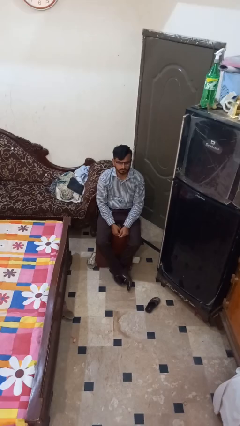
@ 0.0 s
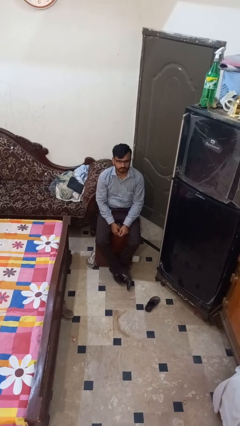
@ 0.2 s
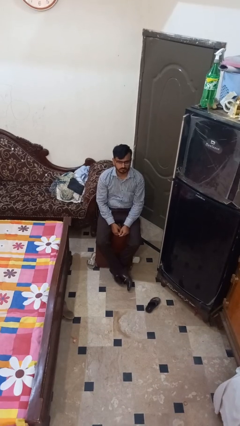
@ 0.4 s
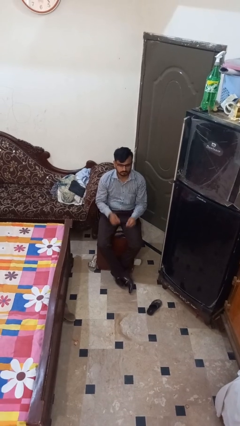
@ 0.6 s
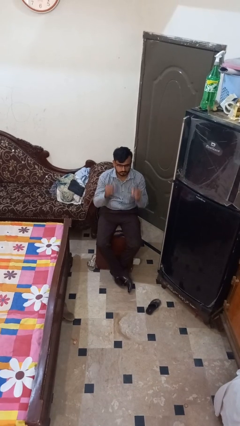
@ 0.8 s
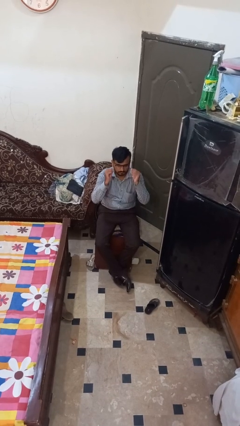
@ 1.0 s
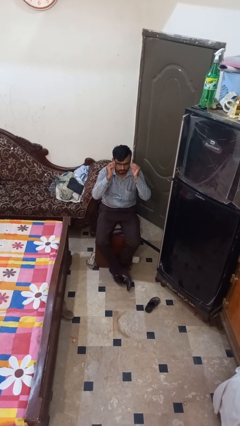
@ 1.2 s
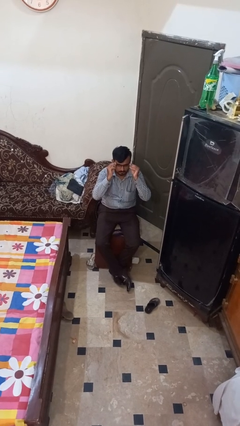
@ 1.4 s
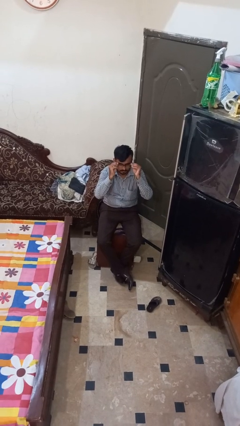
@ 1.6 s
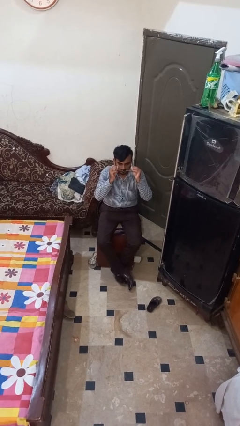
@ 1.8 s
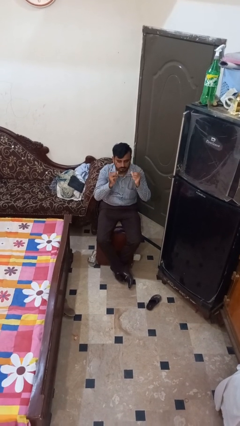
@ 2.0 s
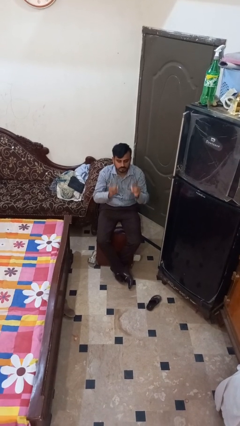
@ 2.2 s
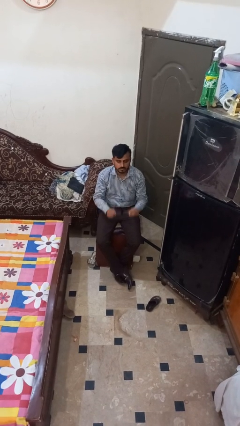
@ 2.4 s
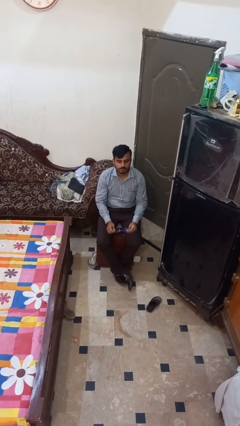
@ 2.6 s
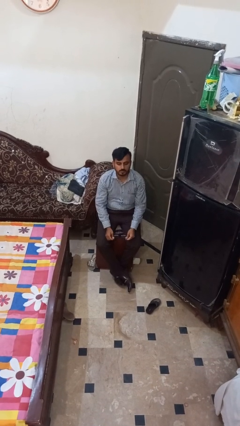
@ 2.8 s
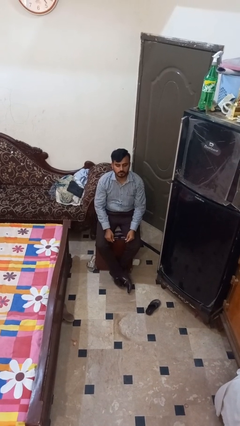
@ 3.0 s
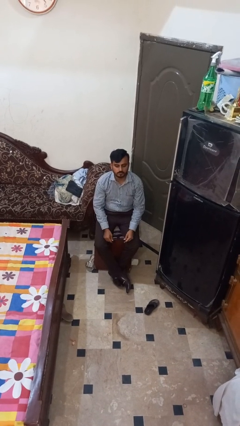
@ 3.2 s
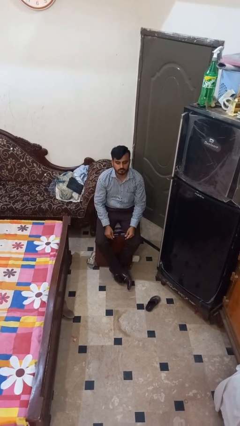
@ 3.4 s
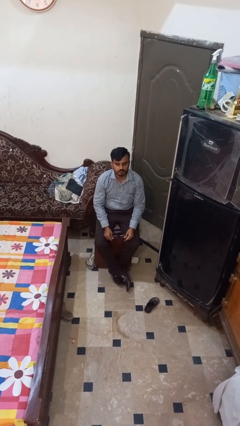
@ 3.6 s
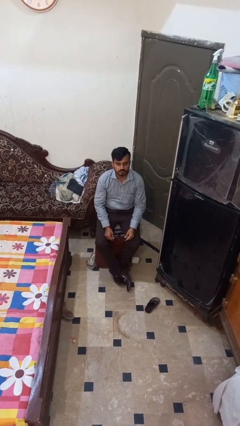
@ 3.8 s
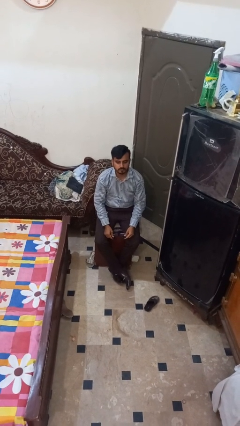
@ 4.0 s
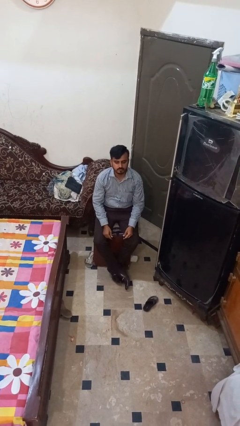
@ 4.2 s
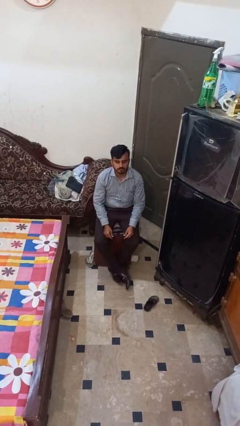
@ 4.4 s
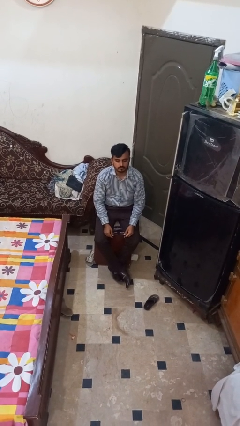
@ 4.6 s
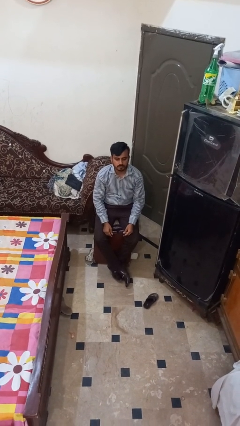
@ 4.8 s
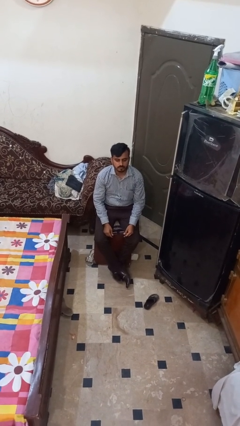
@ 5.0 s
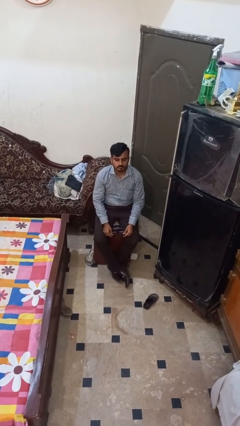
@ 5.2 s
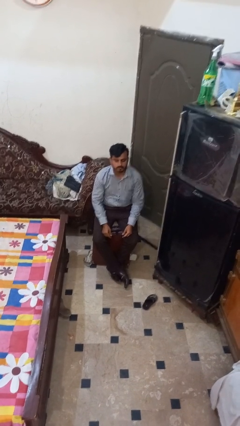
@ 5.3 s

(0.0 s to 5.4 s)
person takes off glasses

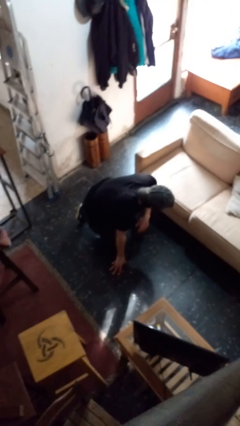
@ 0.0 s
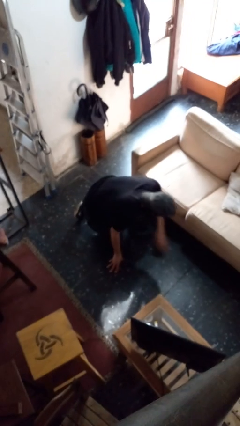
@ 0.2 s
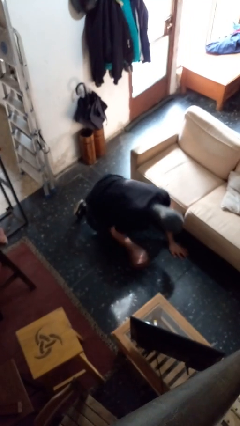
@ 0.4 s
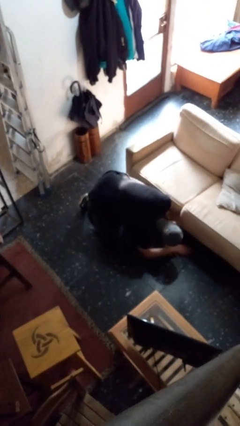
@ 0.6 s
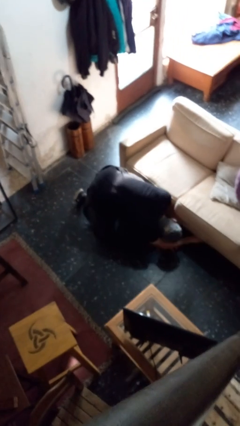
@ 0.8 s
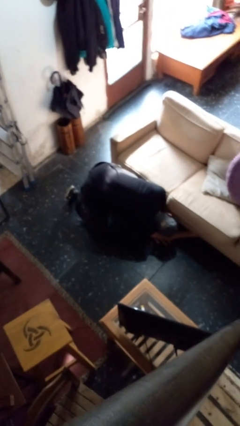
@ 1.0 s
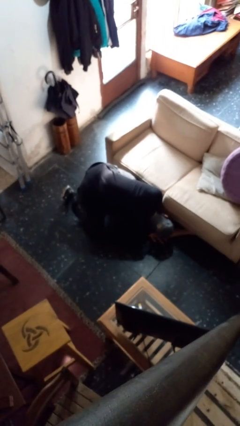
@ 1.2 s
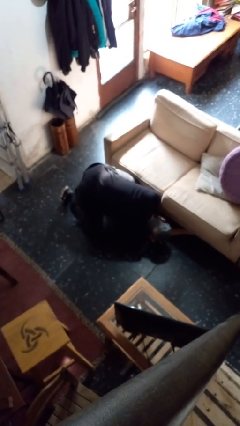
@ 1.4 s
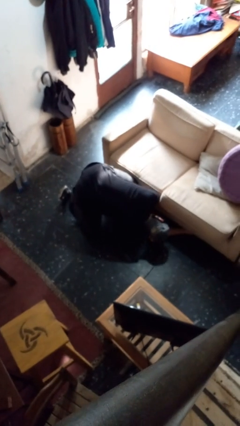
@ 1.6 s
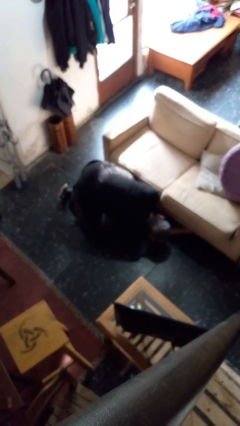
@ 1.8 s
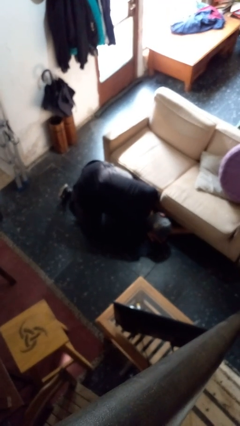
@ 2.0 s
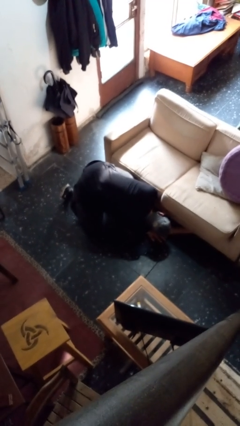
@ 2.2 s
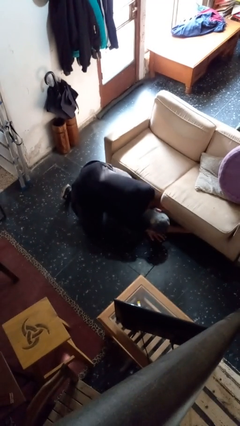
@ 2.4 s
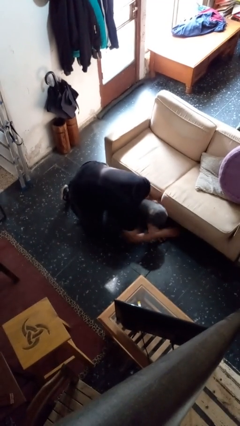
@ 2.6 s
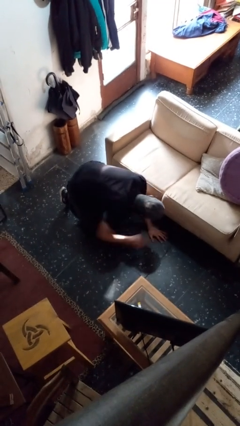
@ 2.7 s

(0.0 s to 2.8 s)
person searches under couch

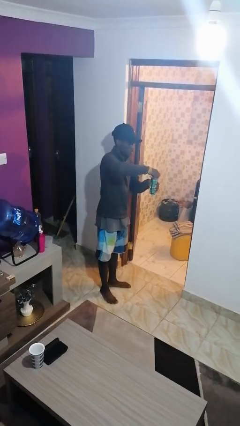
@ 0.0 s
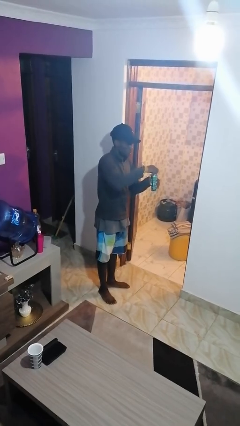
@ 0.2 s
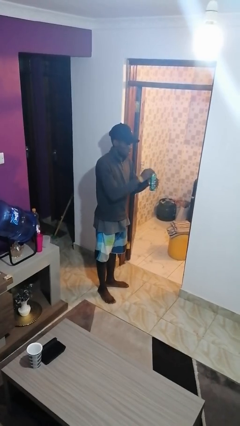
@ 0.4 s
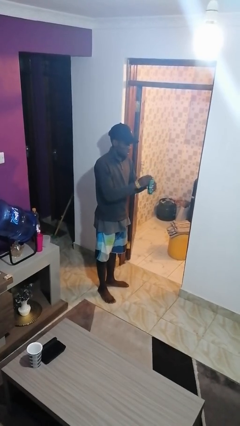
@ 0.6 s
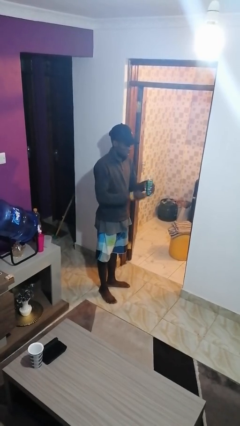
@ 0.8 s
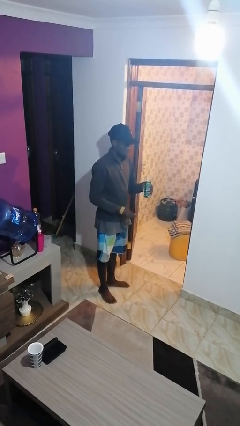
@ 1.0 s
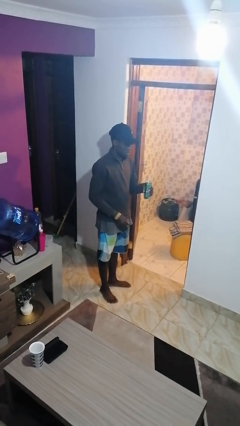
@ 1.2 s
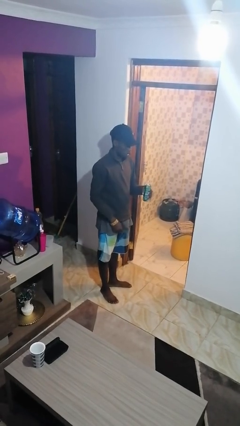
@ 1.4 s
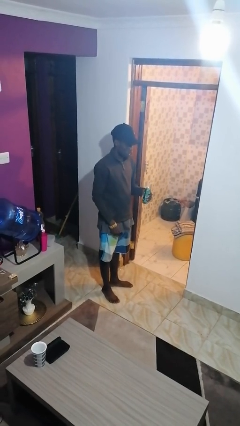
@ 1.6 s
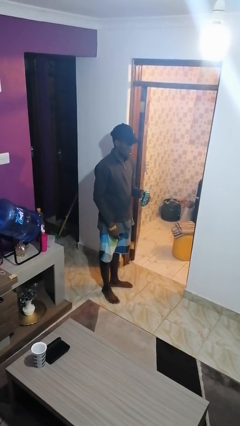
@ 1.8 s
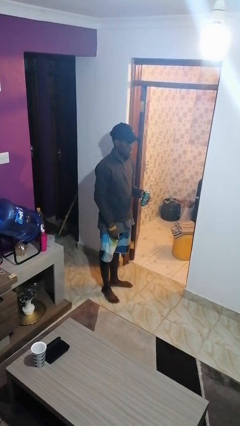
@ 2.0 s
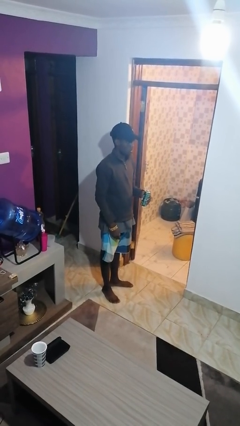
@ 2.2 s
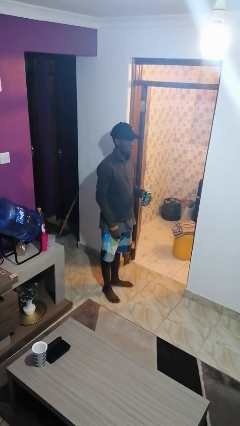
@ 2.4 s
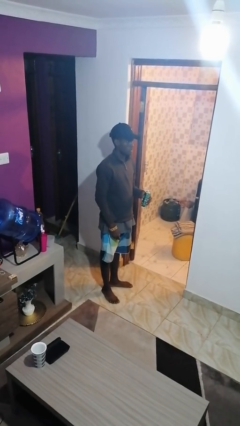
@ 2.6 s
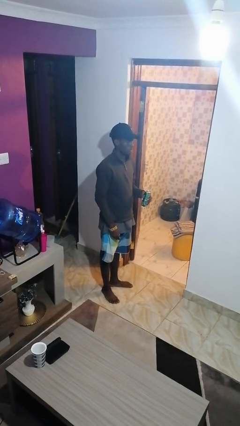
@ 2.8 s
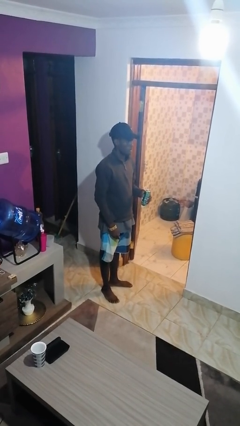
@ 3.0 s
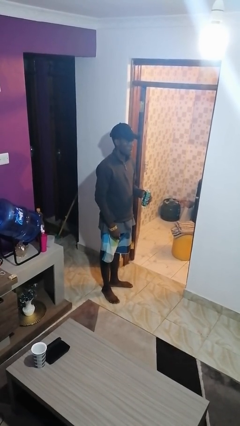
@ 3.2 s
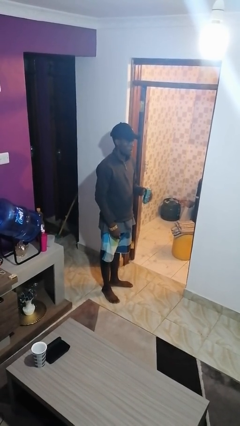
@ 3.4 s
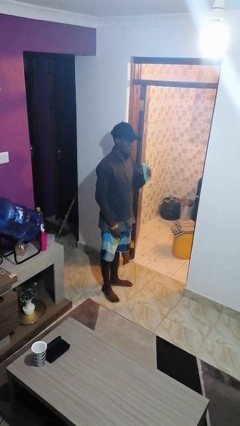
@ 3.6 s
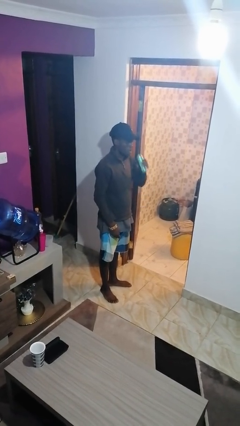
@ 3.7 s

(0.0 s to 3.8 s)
person opens beverage can

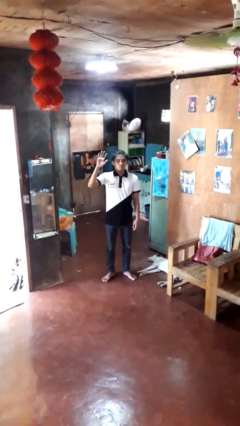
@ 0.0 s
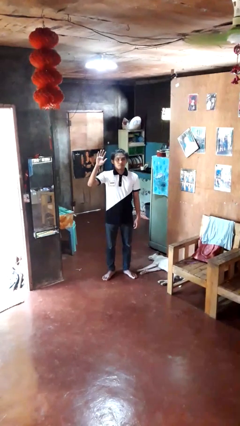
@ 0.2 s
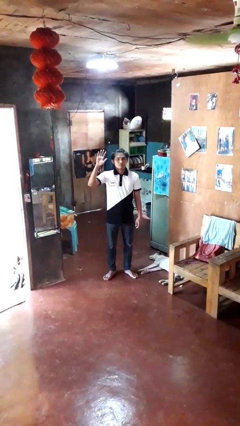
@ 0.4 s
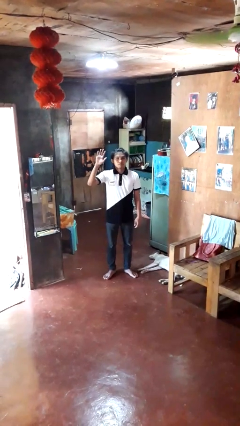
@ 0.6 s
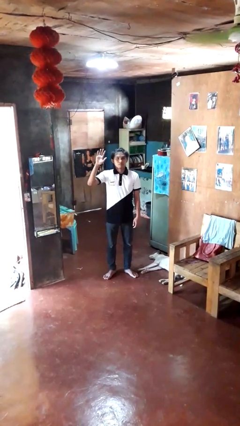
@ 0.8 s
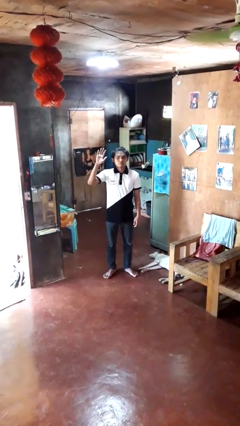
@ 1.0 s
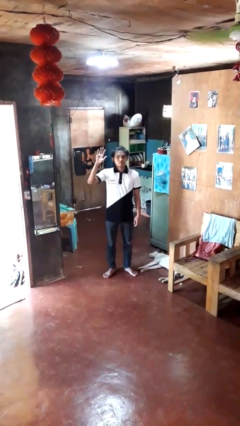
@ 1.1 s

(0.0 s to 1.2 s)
person gestures raise hand

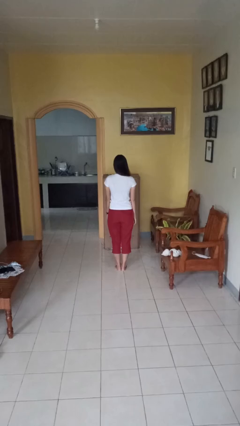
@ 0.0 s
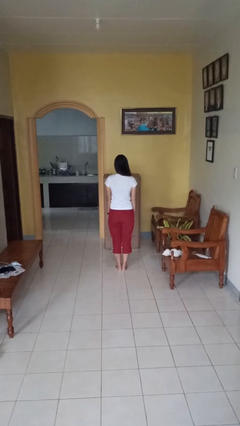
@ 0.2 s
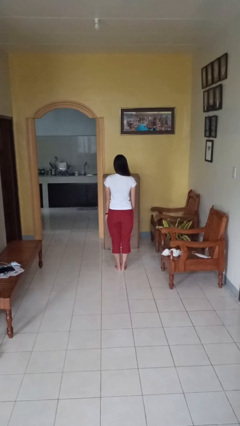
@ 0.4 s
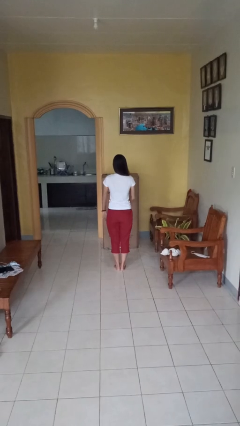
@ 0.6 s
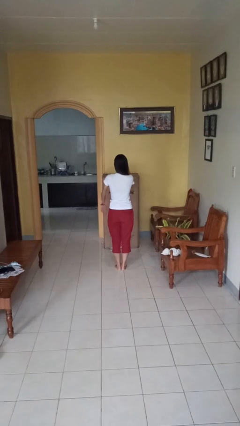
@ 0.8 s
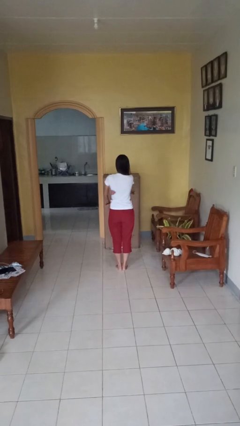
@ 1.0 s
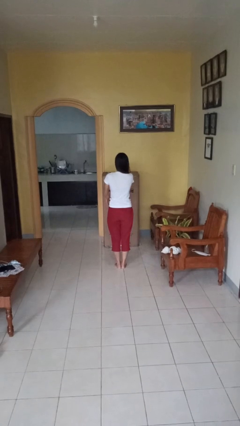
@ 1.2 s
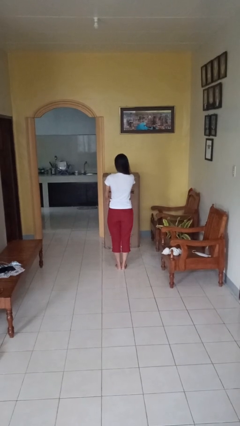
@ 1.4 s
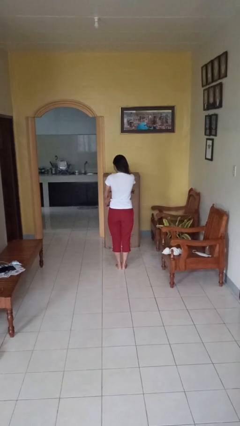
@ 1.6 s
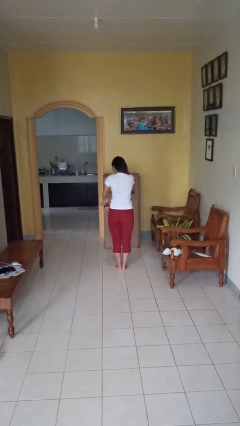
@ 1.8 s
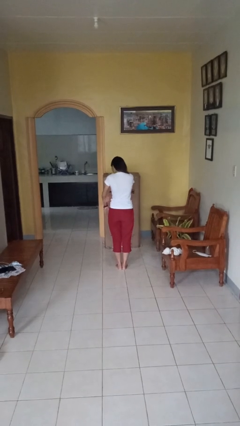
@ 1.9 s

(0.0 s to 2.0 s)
person swats bug

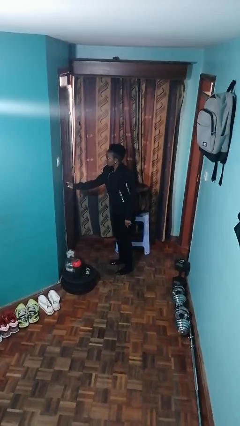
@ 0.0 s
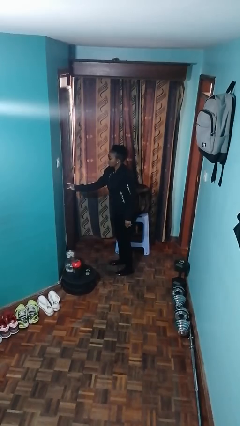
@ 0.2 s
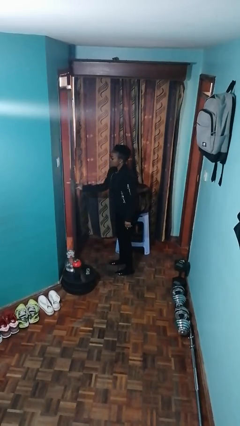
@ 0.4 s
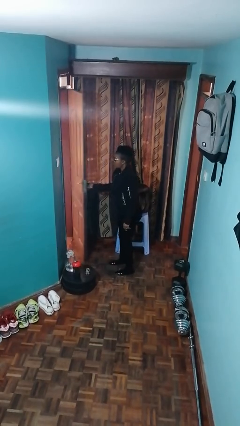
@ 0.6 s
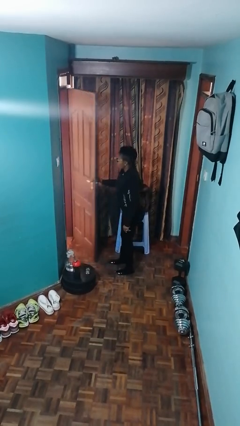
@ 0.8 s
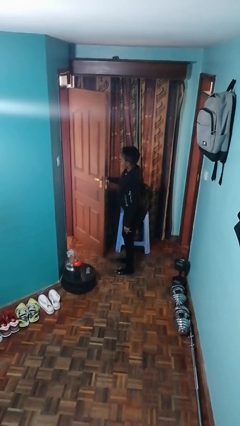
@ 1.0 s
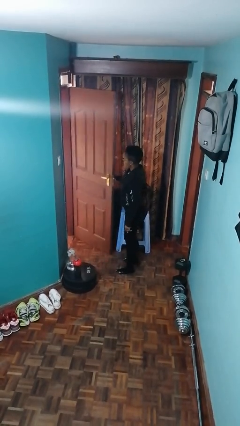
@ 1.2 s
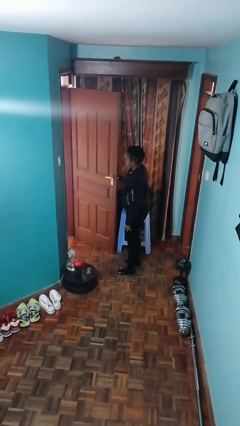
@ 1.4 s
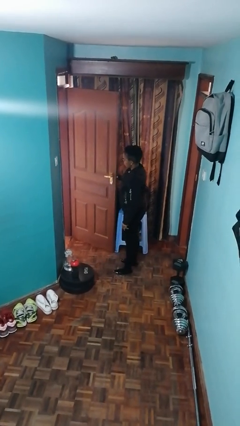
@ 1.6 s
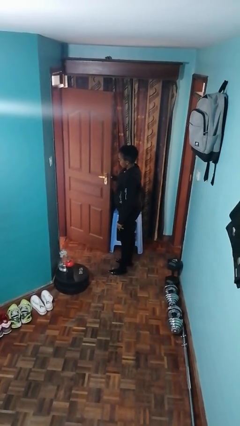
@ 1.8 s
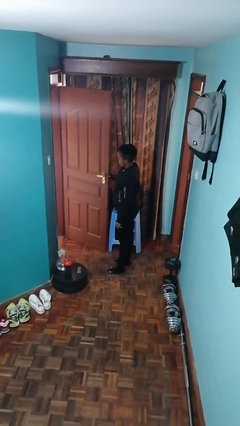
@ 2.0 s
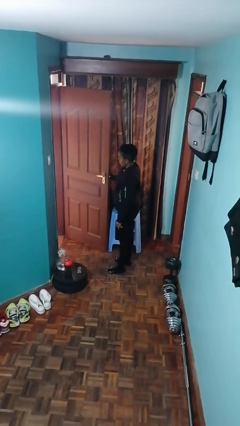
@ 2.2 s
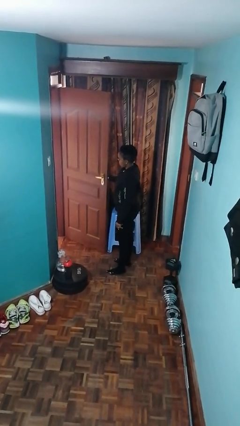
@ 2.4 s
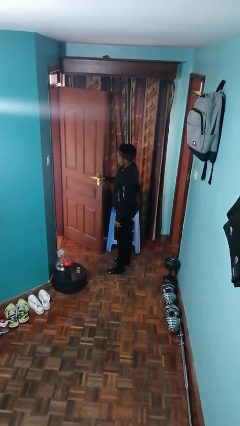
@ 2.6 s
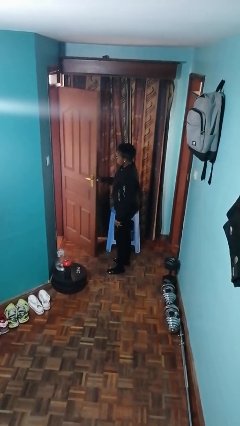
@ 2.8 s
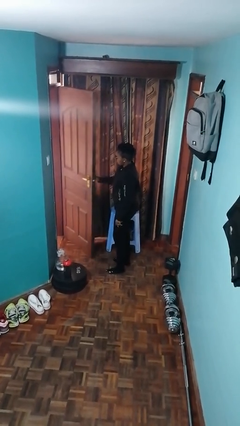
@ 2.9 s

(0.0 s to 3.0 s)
person opens facility door
